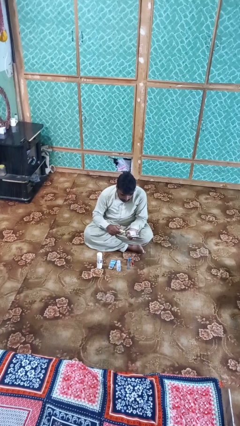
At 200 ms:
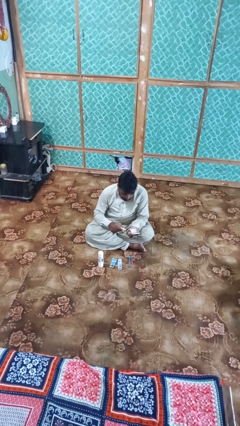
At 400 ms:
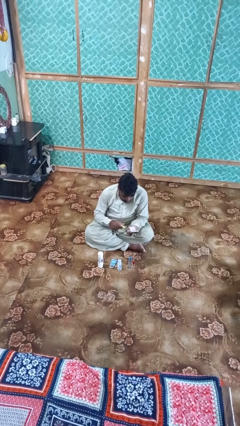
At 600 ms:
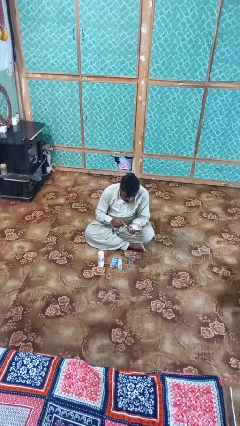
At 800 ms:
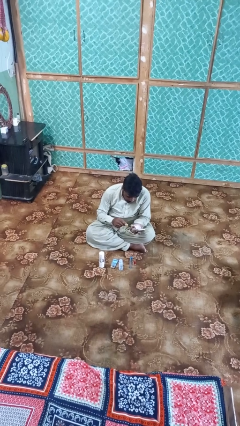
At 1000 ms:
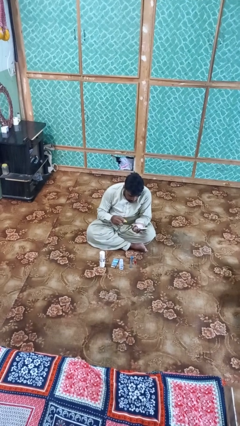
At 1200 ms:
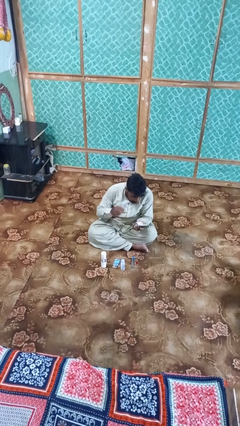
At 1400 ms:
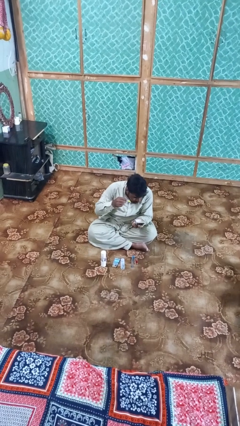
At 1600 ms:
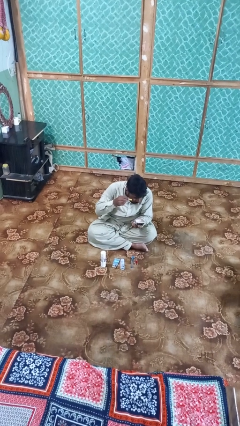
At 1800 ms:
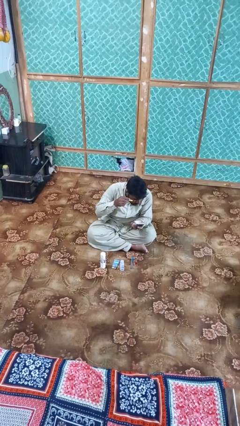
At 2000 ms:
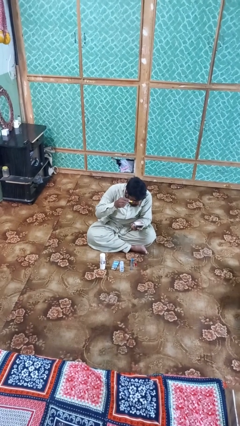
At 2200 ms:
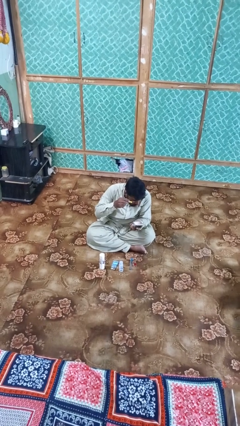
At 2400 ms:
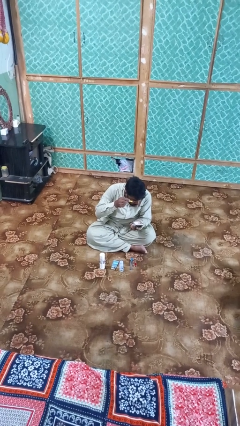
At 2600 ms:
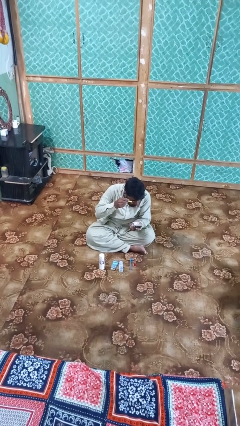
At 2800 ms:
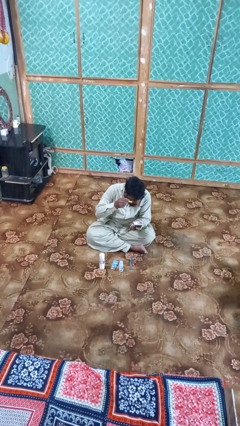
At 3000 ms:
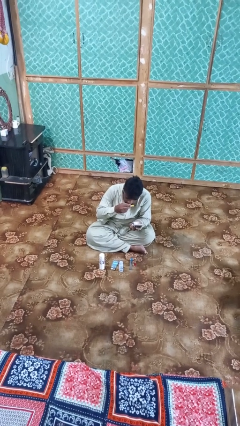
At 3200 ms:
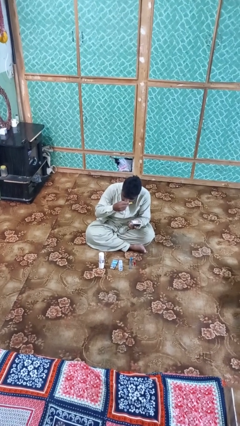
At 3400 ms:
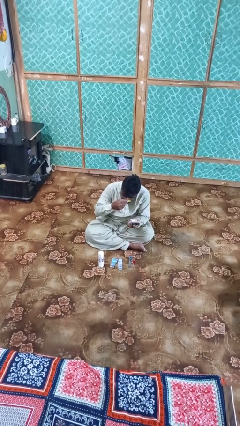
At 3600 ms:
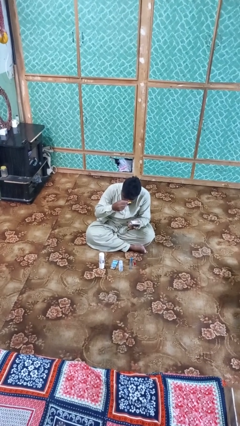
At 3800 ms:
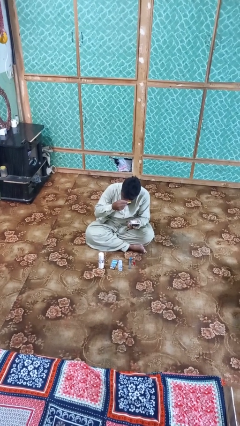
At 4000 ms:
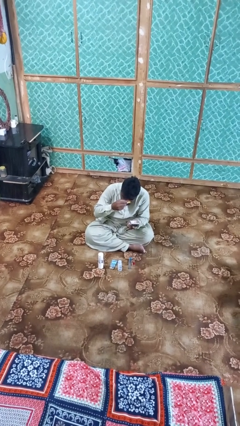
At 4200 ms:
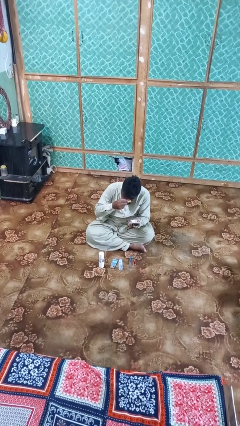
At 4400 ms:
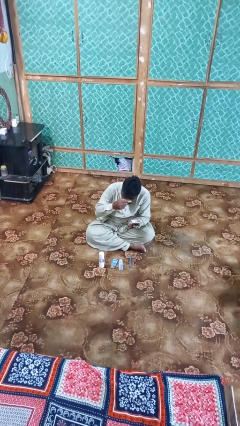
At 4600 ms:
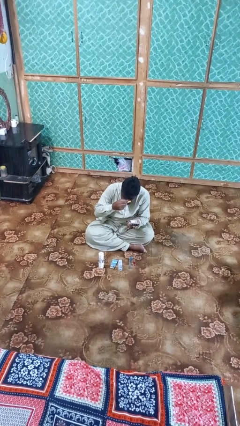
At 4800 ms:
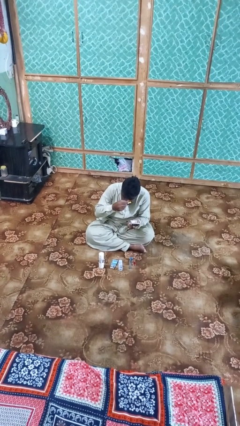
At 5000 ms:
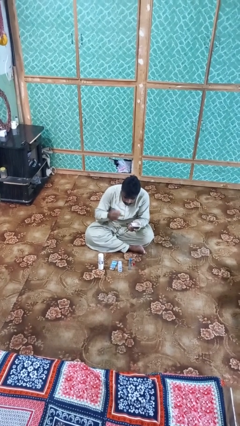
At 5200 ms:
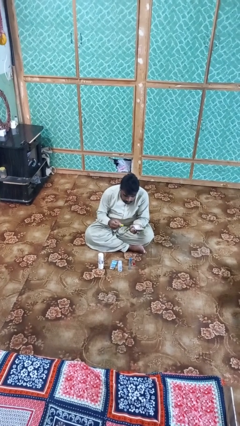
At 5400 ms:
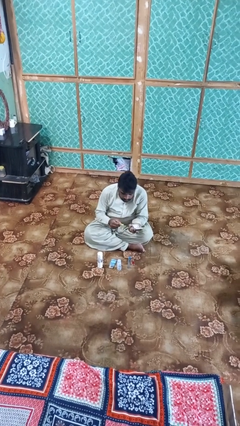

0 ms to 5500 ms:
person applies eye makeup

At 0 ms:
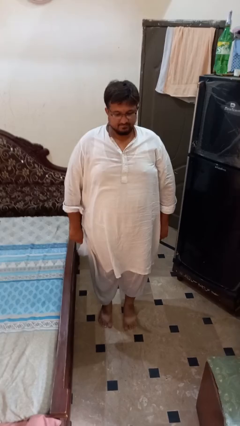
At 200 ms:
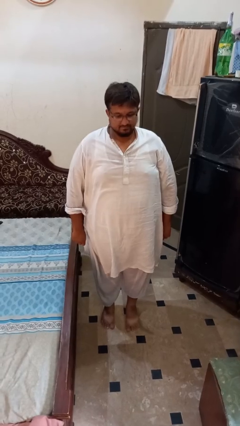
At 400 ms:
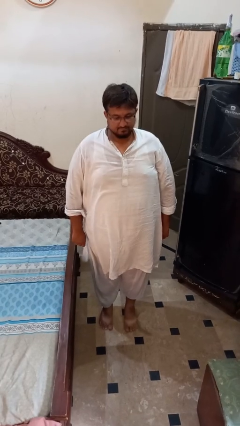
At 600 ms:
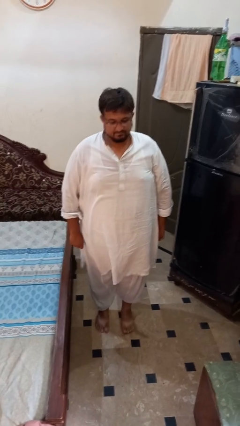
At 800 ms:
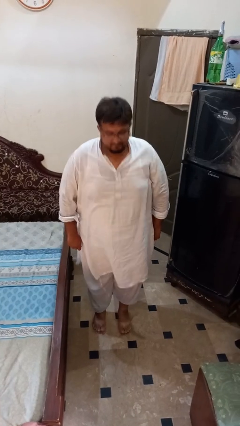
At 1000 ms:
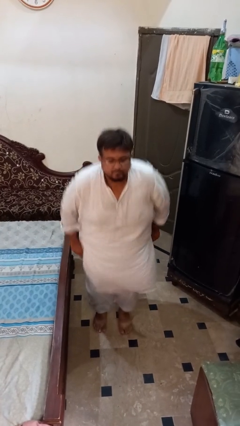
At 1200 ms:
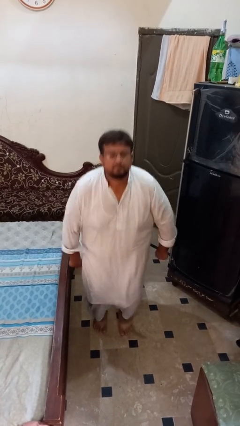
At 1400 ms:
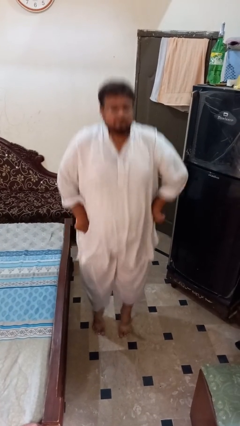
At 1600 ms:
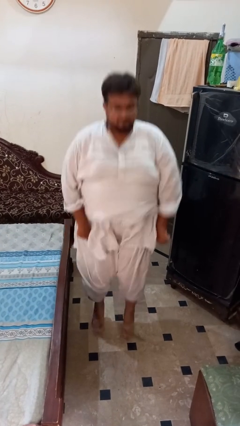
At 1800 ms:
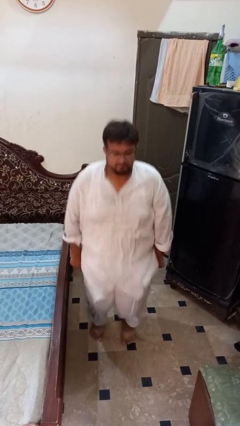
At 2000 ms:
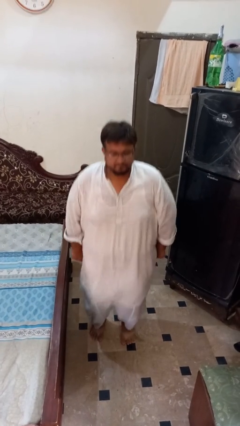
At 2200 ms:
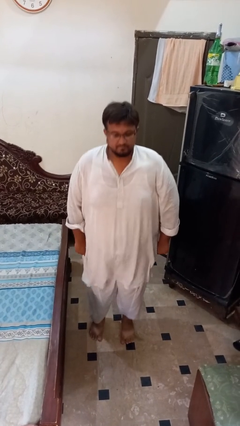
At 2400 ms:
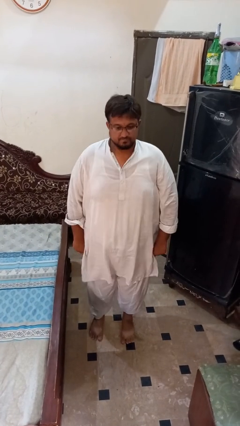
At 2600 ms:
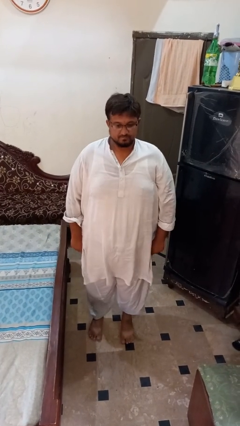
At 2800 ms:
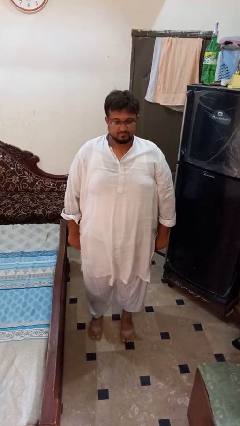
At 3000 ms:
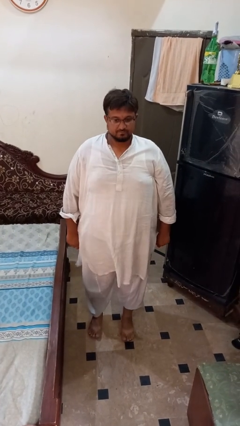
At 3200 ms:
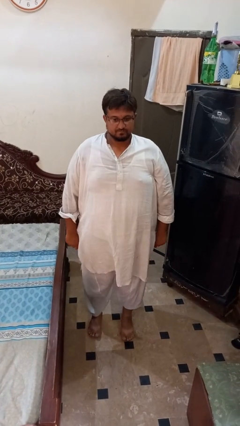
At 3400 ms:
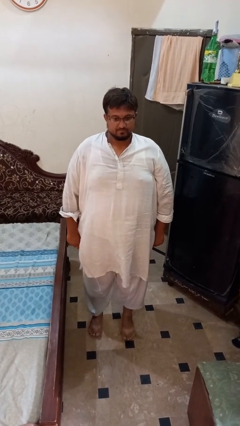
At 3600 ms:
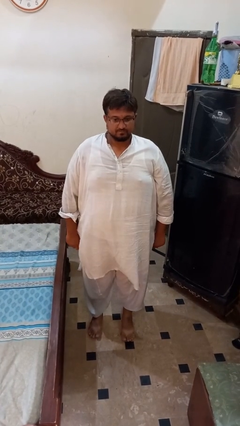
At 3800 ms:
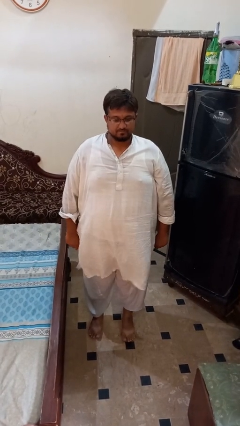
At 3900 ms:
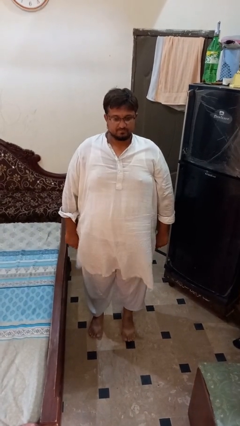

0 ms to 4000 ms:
person jumps

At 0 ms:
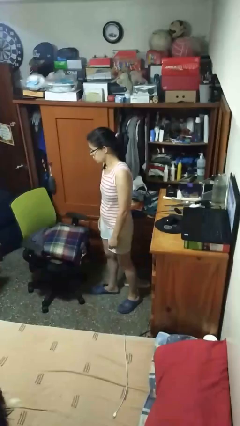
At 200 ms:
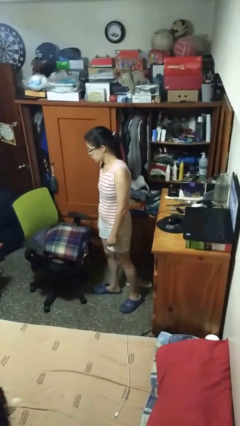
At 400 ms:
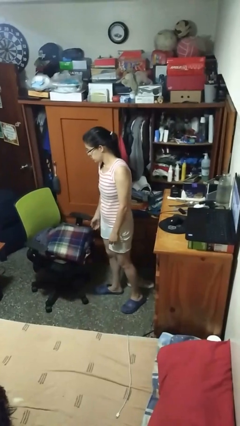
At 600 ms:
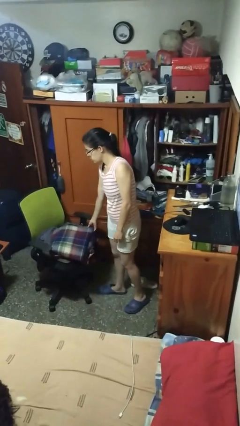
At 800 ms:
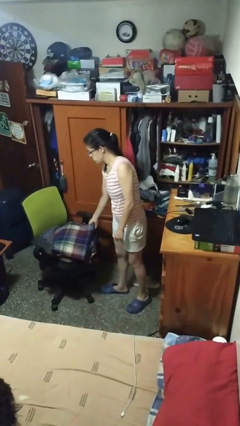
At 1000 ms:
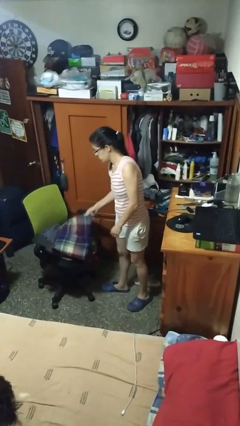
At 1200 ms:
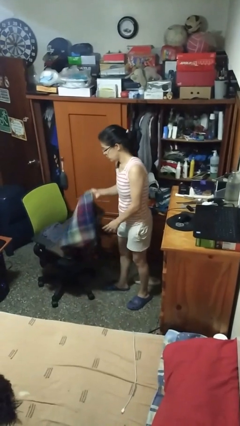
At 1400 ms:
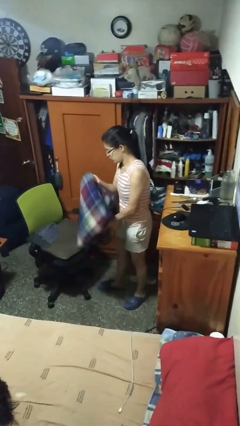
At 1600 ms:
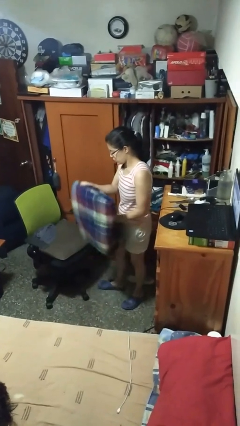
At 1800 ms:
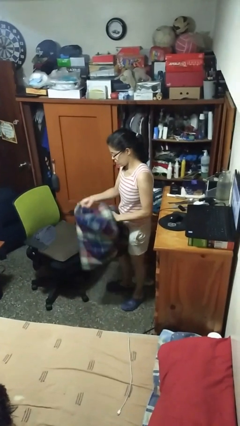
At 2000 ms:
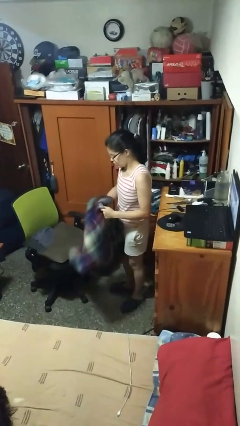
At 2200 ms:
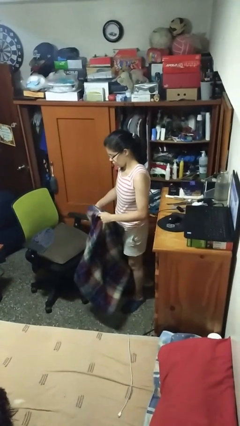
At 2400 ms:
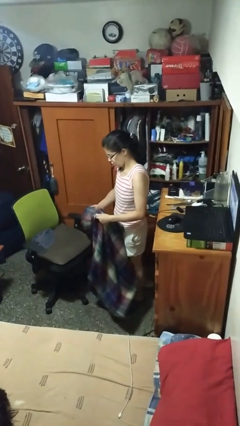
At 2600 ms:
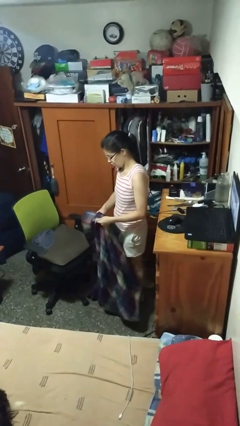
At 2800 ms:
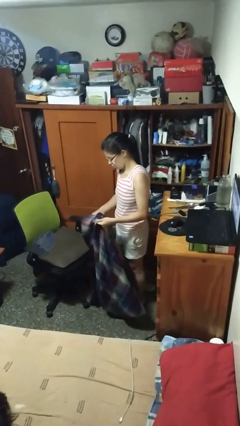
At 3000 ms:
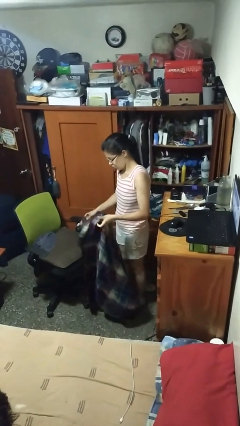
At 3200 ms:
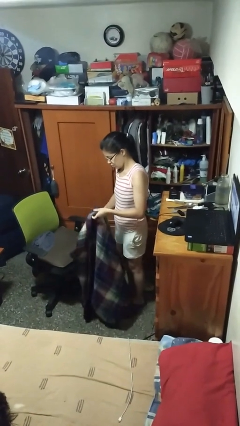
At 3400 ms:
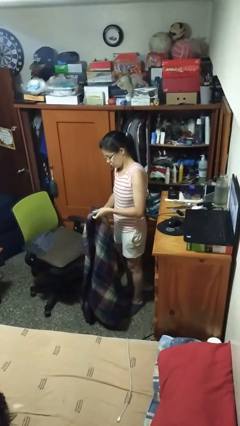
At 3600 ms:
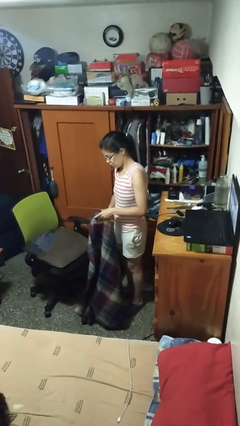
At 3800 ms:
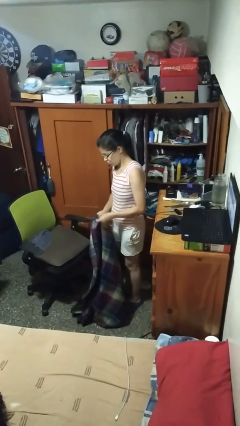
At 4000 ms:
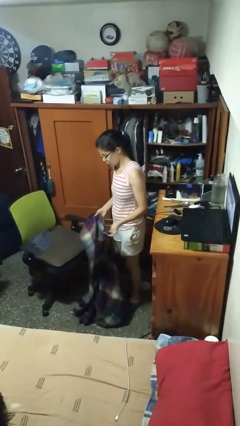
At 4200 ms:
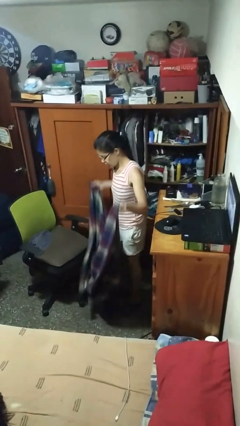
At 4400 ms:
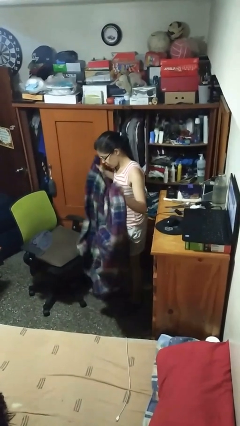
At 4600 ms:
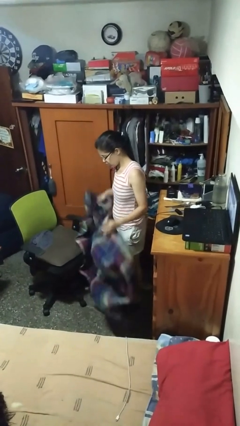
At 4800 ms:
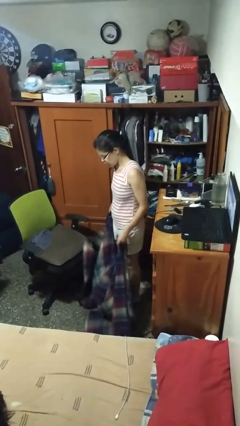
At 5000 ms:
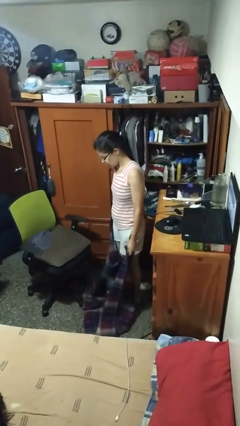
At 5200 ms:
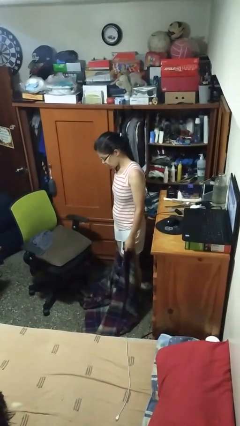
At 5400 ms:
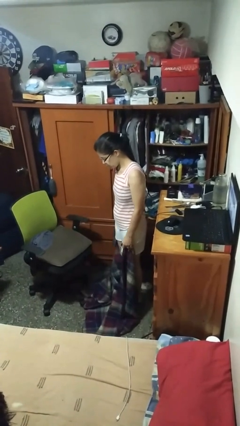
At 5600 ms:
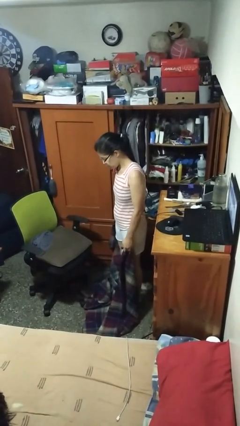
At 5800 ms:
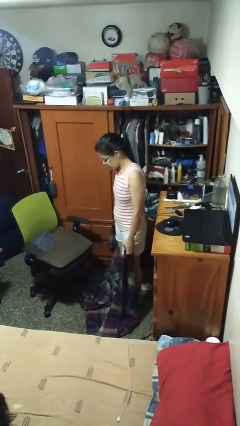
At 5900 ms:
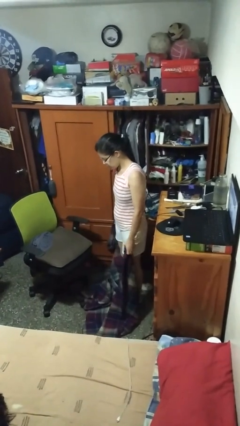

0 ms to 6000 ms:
person unfolds blanket

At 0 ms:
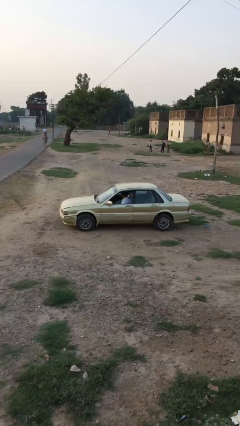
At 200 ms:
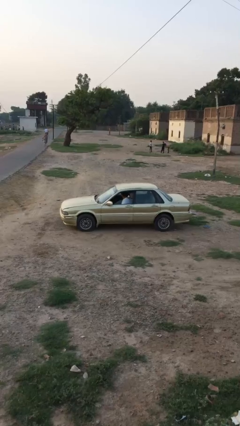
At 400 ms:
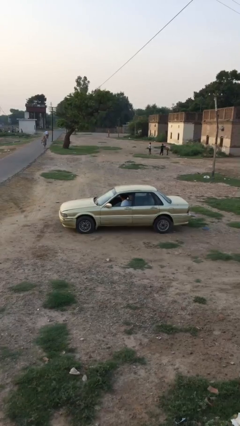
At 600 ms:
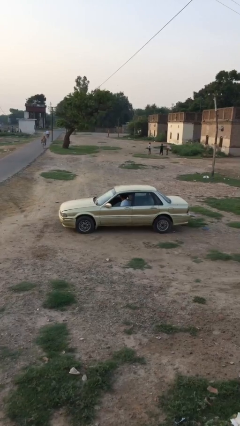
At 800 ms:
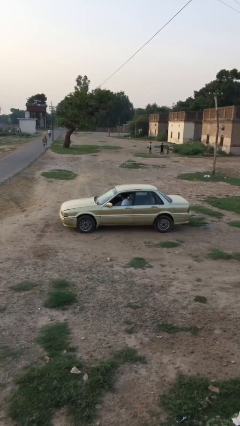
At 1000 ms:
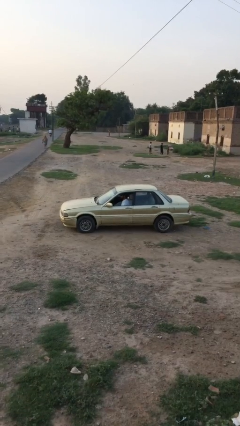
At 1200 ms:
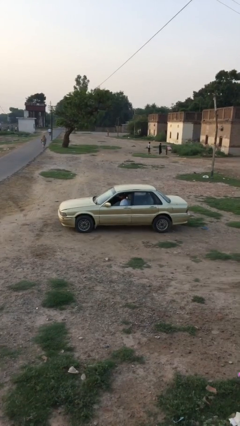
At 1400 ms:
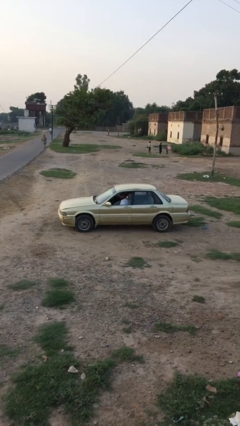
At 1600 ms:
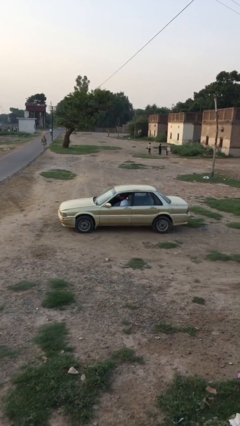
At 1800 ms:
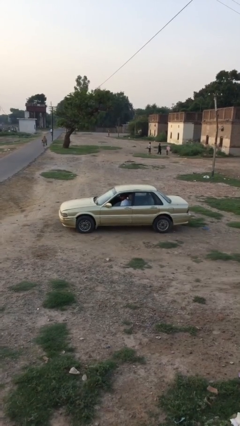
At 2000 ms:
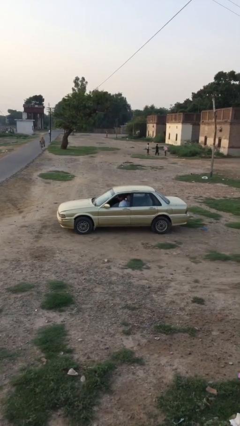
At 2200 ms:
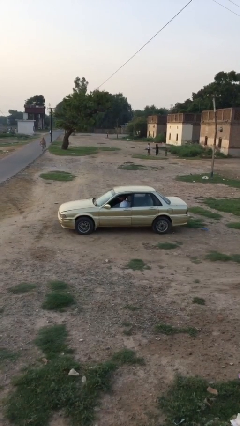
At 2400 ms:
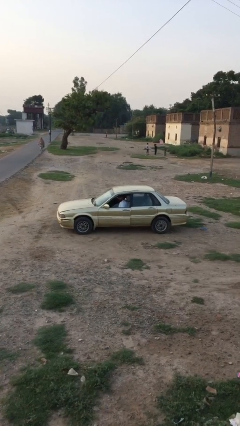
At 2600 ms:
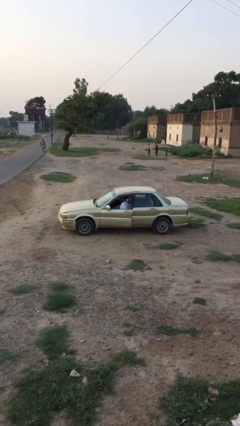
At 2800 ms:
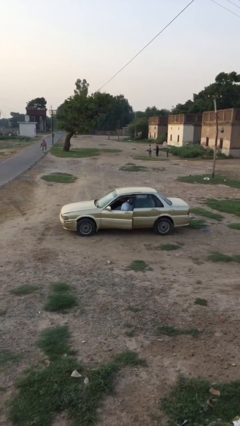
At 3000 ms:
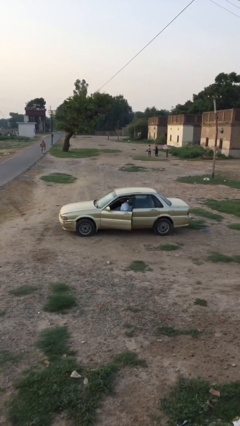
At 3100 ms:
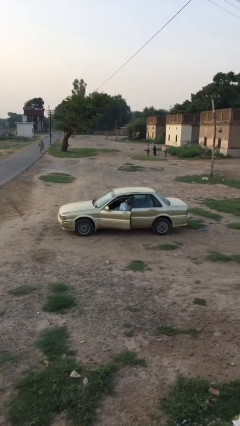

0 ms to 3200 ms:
person opens car door
